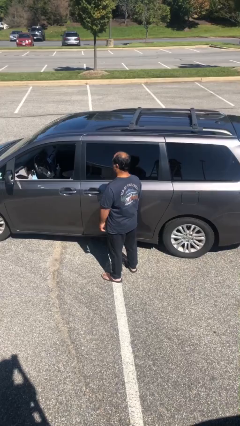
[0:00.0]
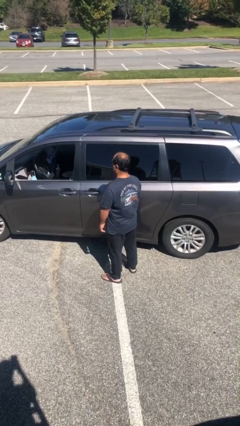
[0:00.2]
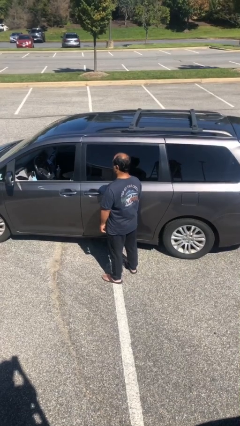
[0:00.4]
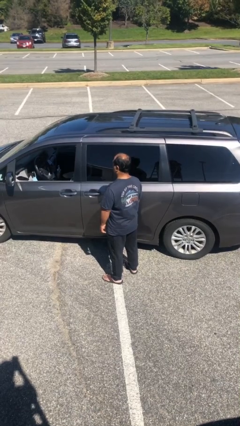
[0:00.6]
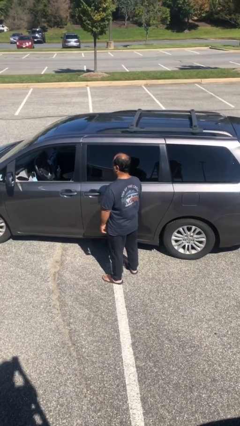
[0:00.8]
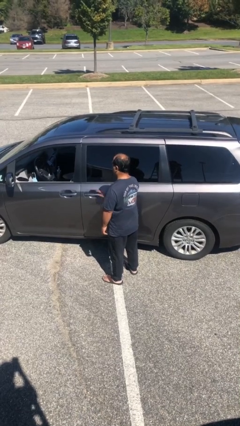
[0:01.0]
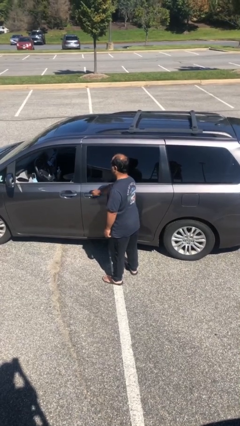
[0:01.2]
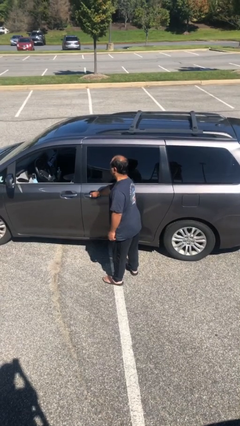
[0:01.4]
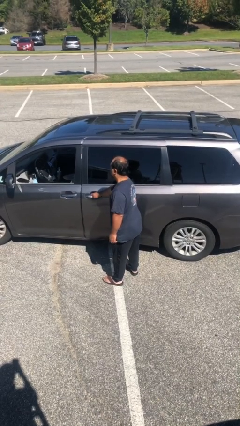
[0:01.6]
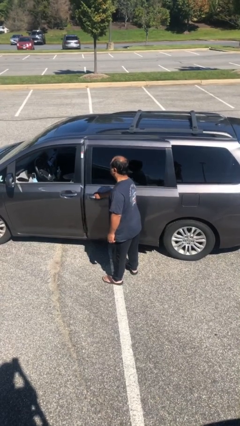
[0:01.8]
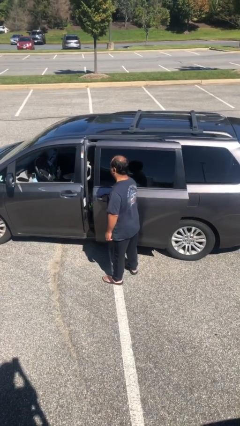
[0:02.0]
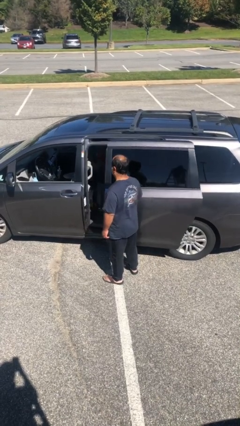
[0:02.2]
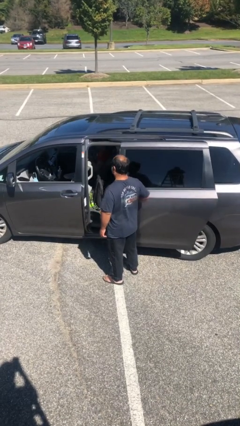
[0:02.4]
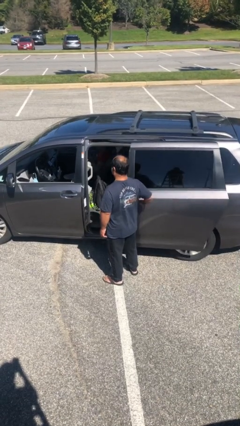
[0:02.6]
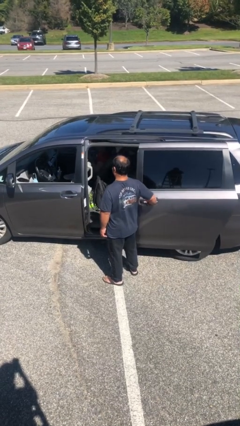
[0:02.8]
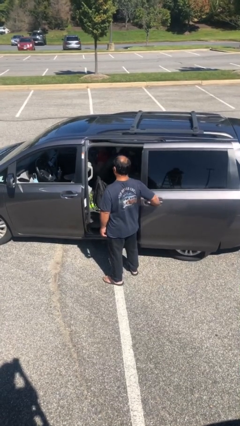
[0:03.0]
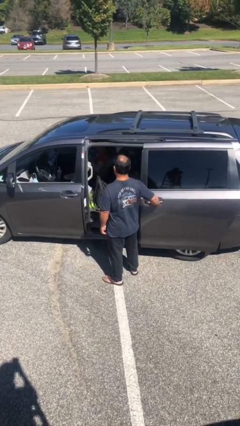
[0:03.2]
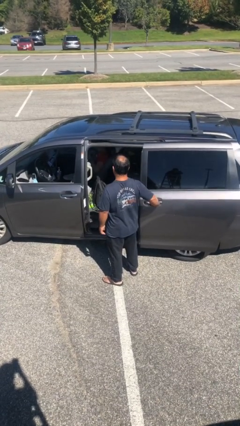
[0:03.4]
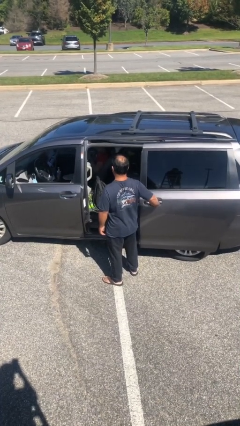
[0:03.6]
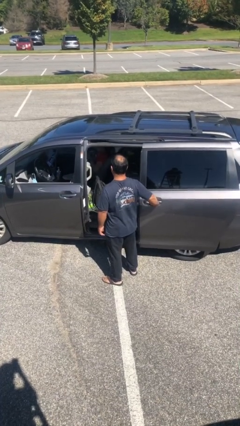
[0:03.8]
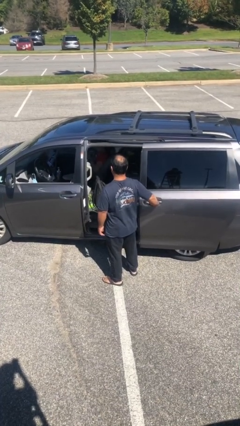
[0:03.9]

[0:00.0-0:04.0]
person opens car door

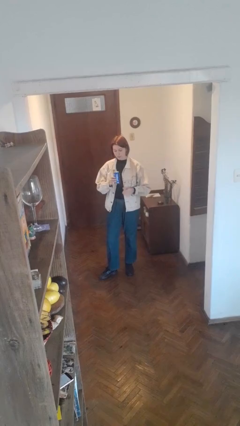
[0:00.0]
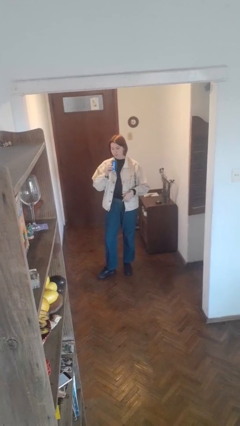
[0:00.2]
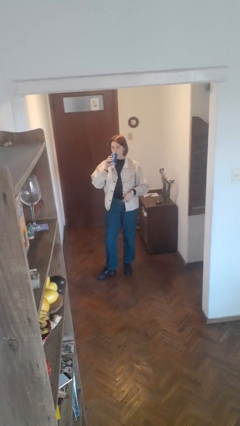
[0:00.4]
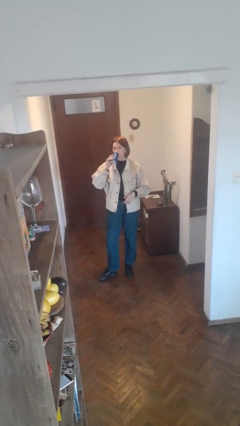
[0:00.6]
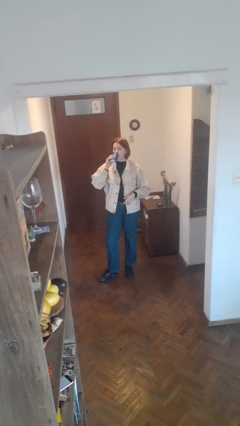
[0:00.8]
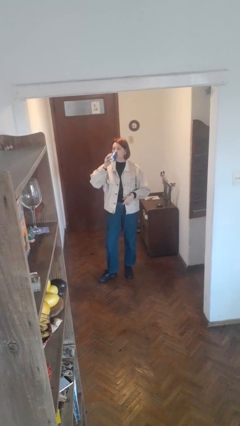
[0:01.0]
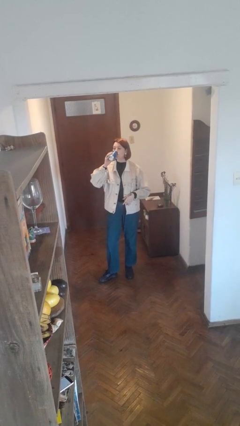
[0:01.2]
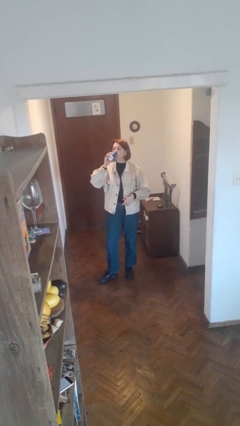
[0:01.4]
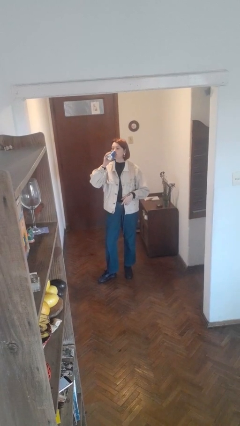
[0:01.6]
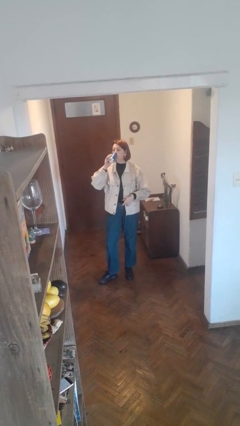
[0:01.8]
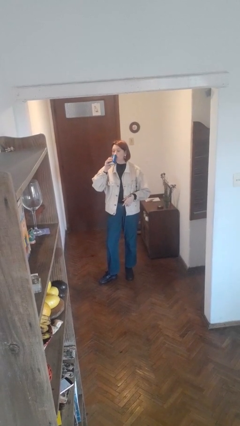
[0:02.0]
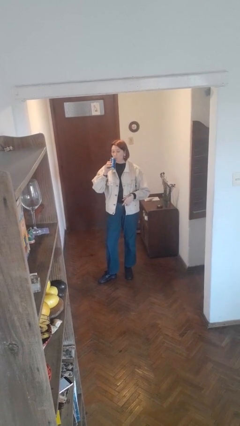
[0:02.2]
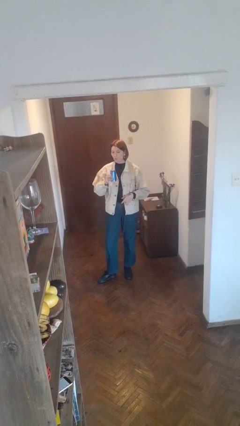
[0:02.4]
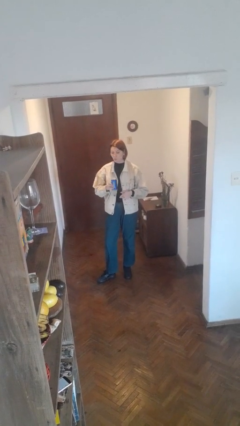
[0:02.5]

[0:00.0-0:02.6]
person drinks from beverage can

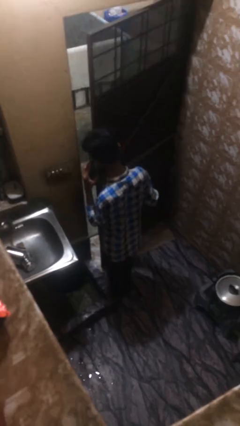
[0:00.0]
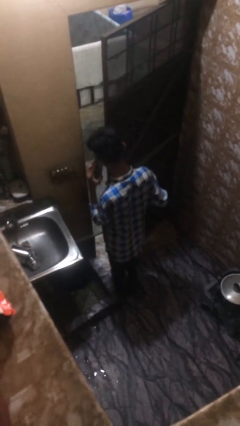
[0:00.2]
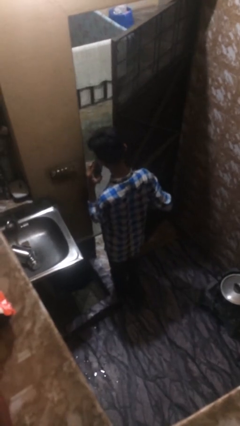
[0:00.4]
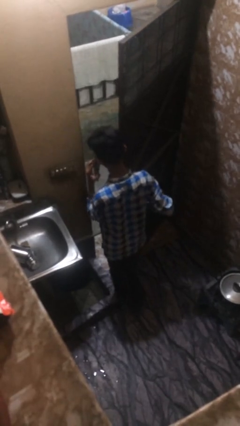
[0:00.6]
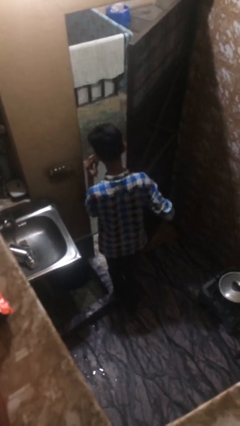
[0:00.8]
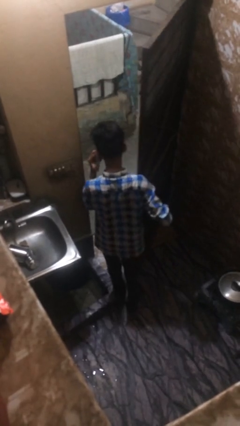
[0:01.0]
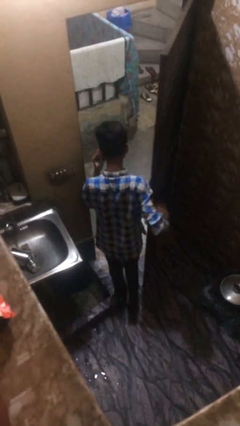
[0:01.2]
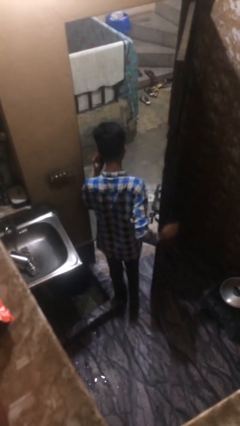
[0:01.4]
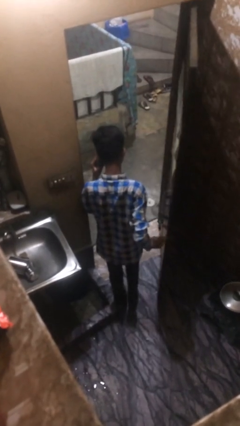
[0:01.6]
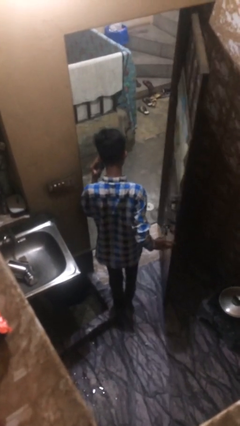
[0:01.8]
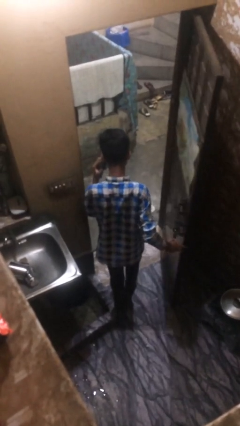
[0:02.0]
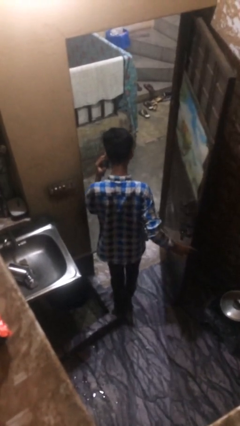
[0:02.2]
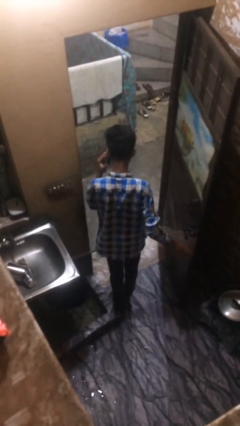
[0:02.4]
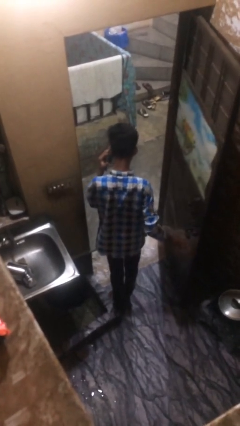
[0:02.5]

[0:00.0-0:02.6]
person opens facility door

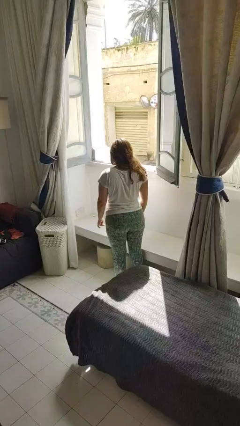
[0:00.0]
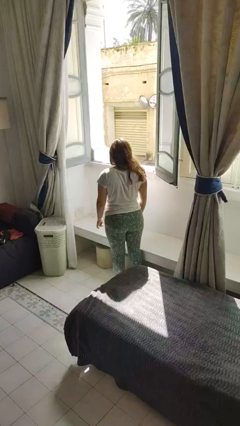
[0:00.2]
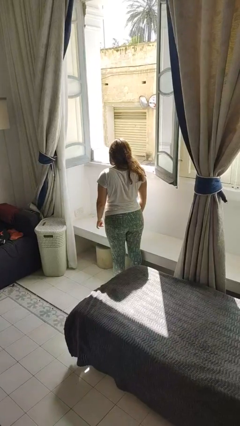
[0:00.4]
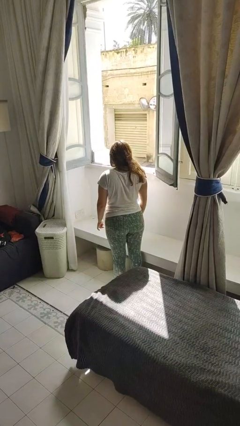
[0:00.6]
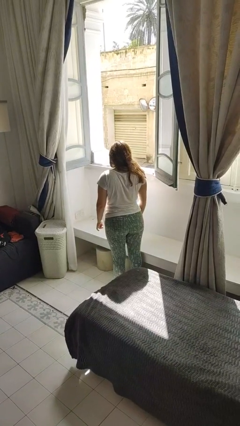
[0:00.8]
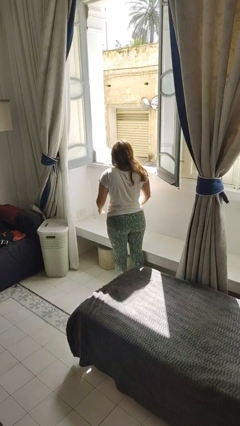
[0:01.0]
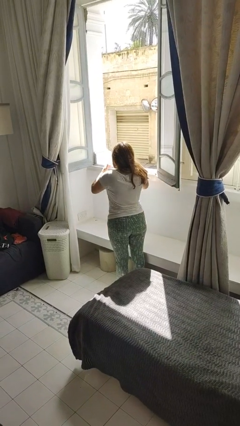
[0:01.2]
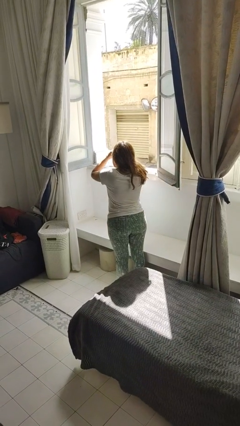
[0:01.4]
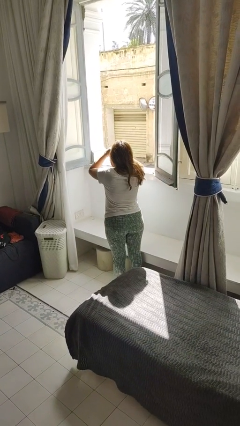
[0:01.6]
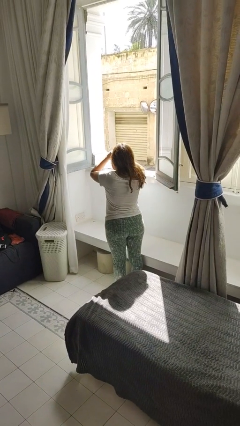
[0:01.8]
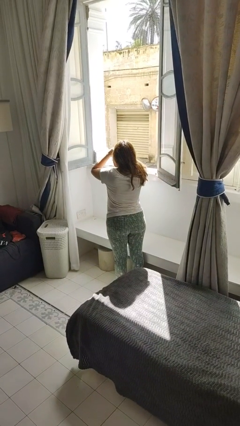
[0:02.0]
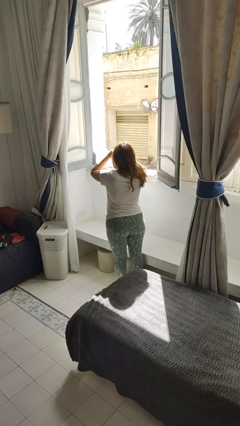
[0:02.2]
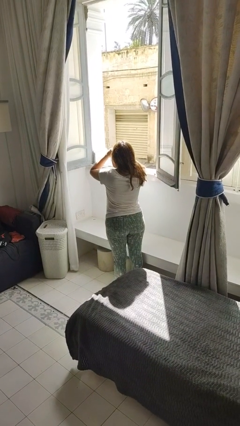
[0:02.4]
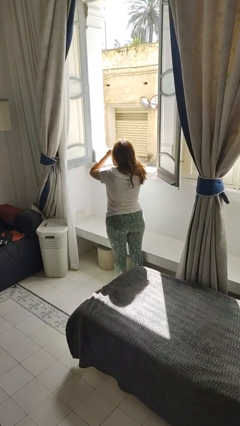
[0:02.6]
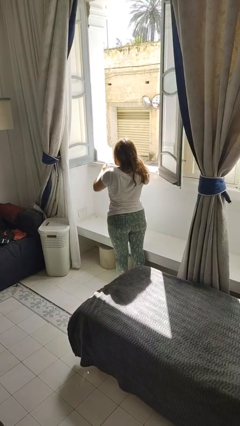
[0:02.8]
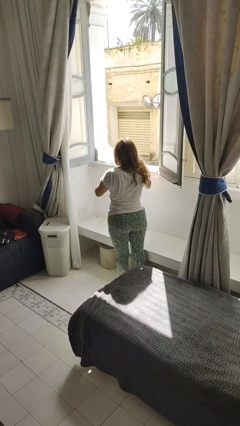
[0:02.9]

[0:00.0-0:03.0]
person shades eyes

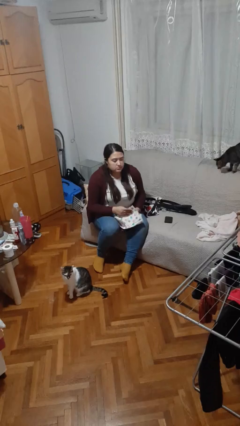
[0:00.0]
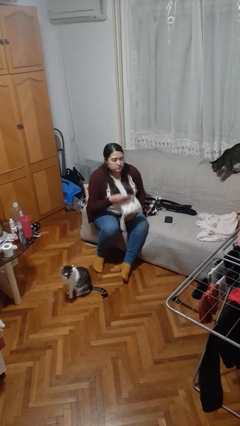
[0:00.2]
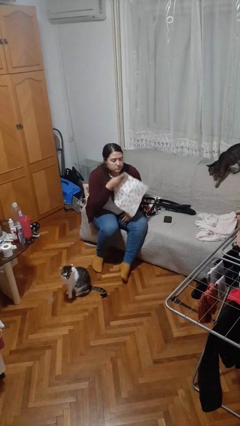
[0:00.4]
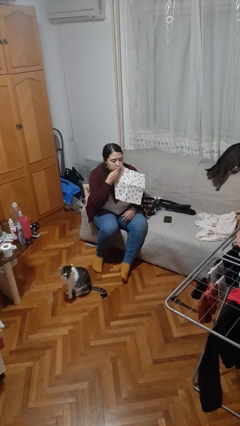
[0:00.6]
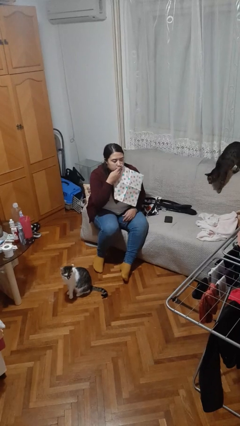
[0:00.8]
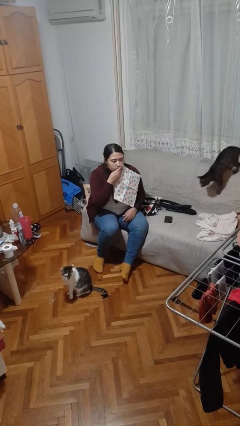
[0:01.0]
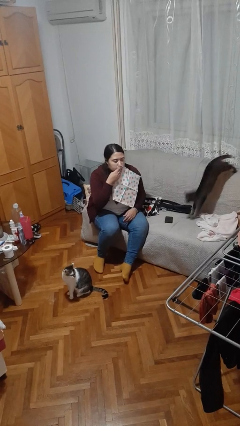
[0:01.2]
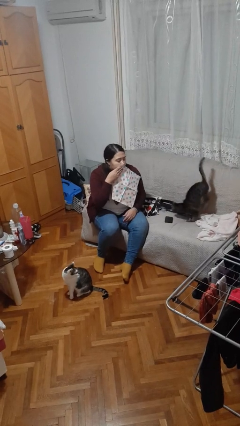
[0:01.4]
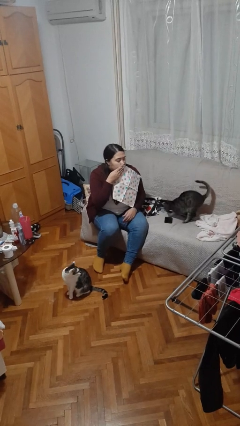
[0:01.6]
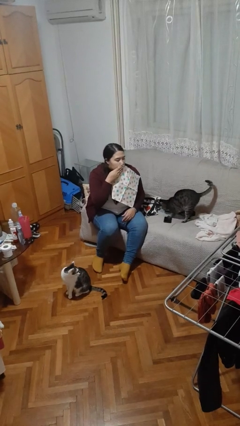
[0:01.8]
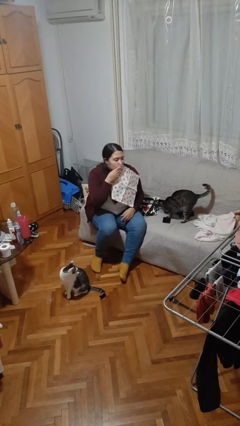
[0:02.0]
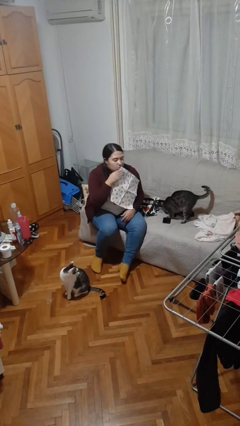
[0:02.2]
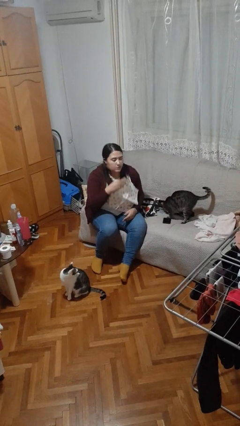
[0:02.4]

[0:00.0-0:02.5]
person wipes mouth with napkin

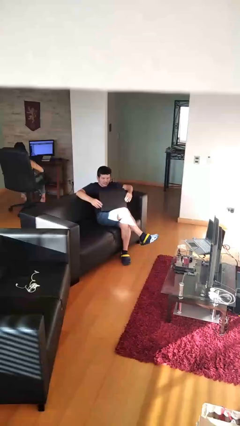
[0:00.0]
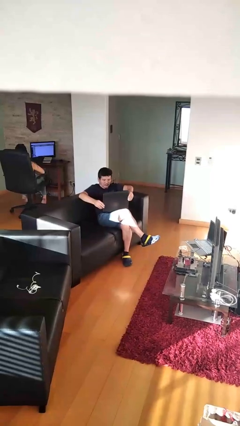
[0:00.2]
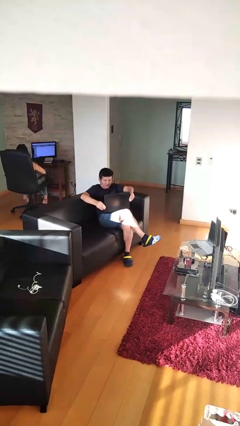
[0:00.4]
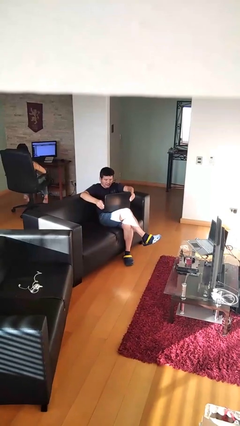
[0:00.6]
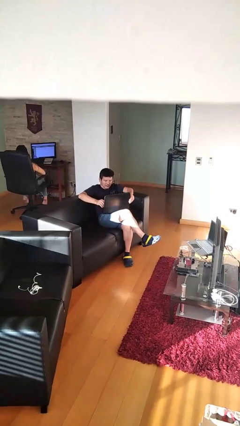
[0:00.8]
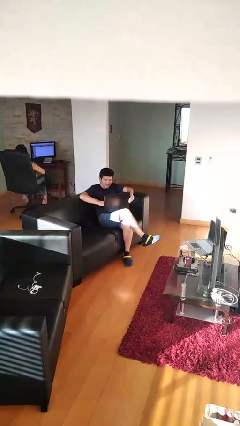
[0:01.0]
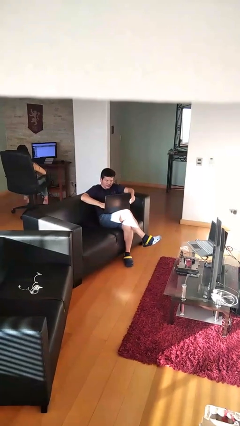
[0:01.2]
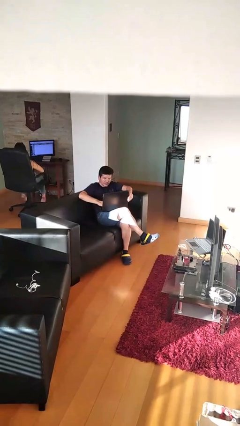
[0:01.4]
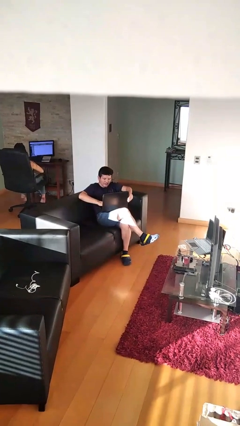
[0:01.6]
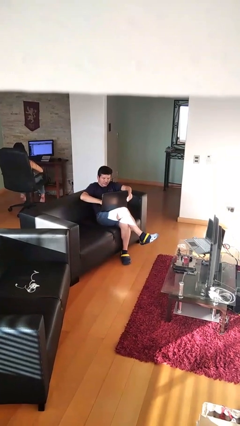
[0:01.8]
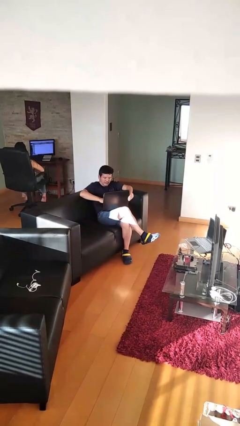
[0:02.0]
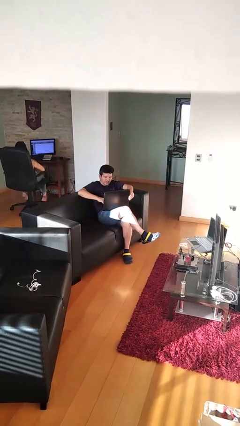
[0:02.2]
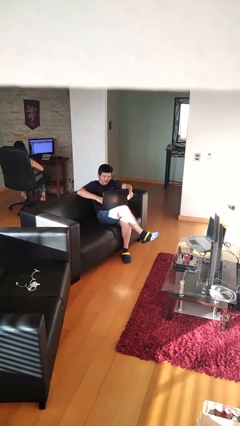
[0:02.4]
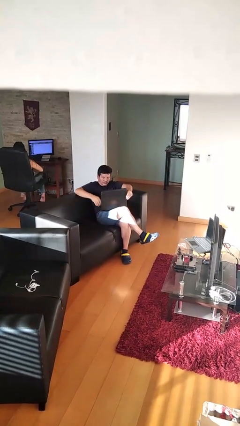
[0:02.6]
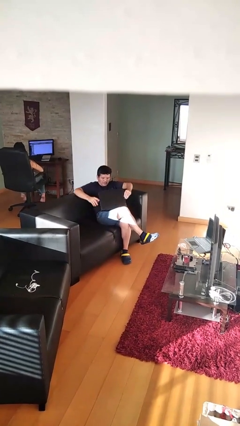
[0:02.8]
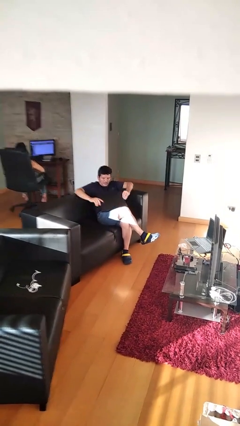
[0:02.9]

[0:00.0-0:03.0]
person interacts with laptop
